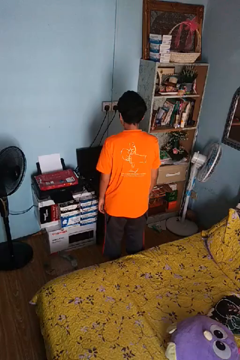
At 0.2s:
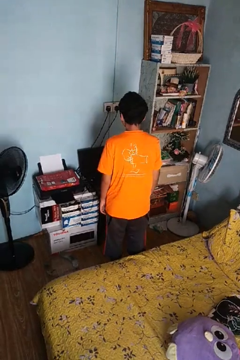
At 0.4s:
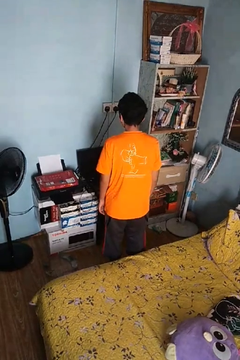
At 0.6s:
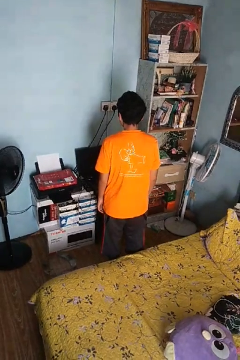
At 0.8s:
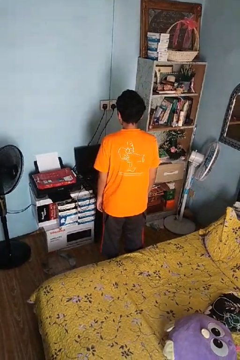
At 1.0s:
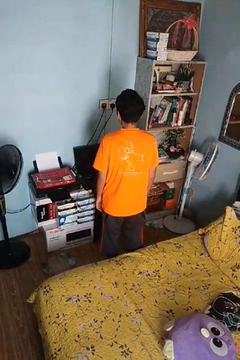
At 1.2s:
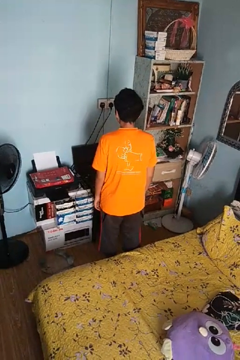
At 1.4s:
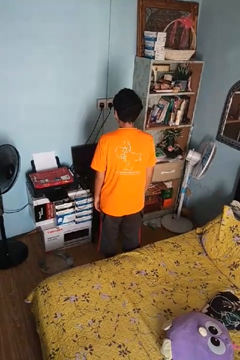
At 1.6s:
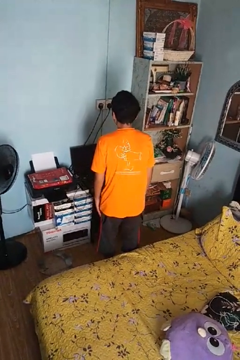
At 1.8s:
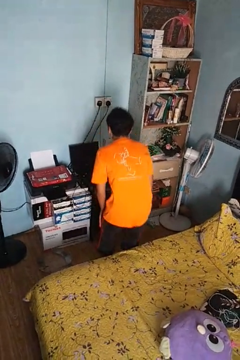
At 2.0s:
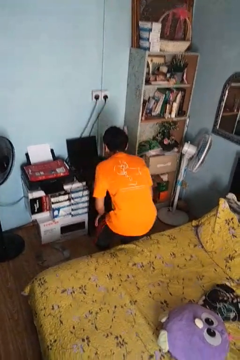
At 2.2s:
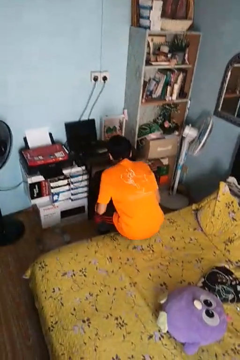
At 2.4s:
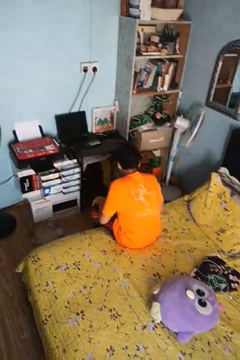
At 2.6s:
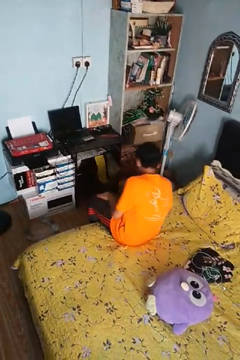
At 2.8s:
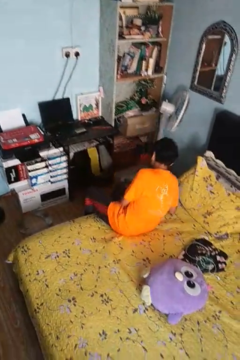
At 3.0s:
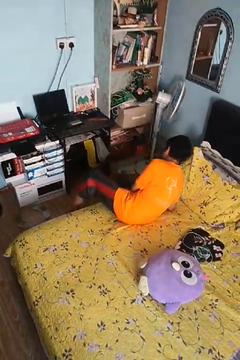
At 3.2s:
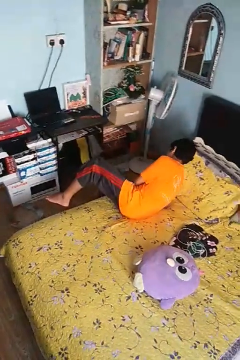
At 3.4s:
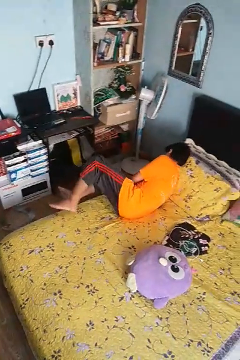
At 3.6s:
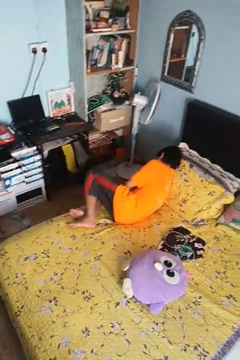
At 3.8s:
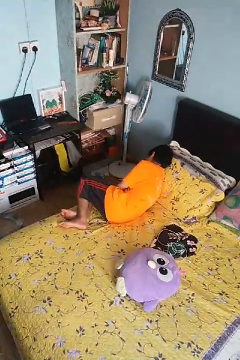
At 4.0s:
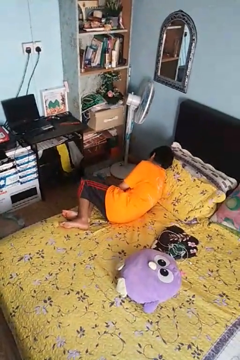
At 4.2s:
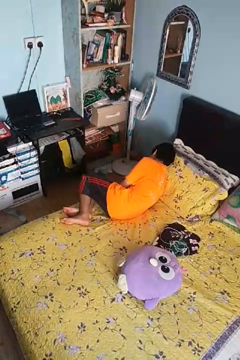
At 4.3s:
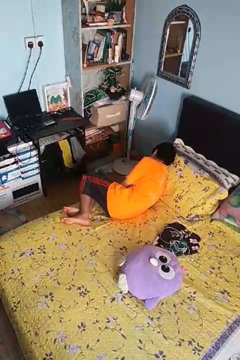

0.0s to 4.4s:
person lies down on bed

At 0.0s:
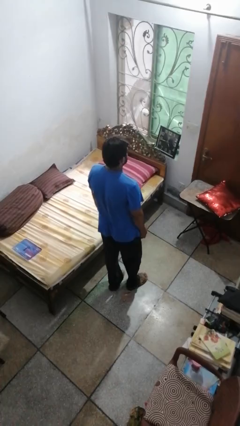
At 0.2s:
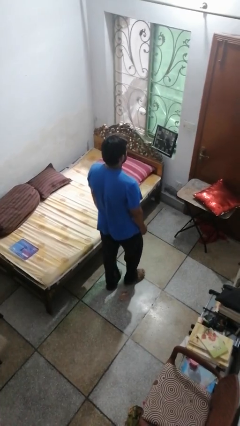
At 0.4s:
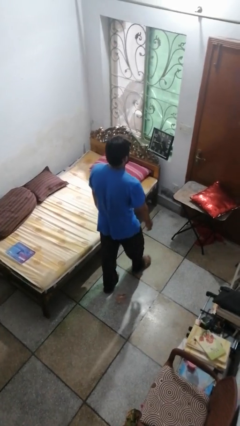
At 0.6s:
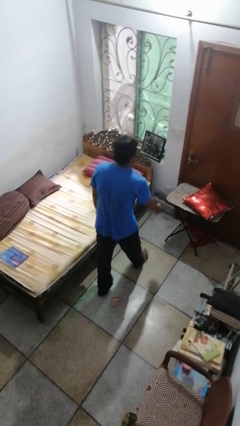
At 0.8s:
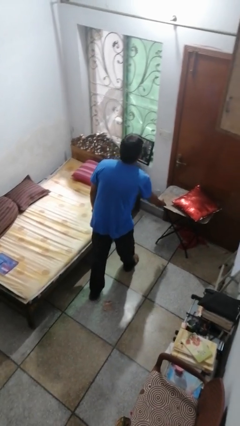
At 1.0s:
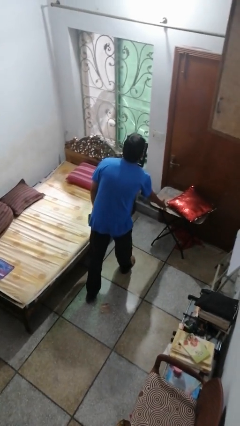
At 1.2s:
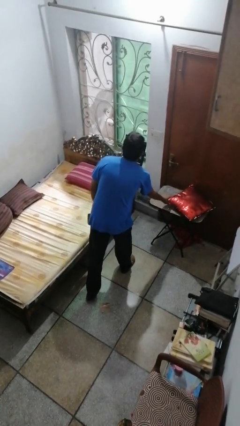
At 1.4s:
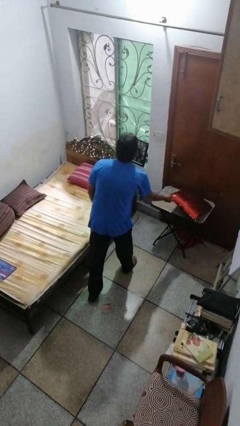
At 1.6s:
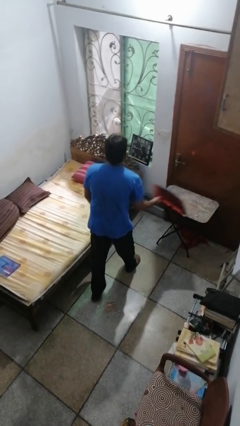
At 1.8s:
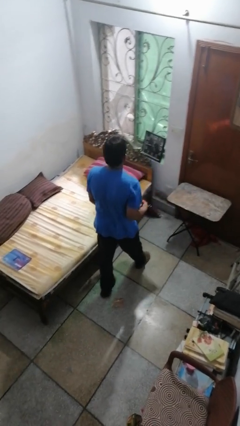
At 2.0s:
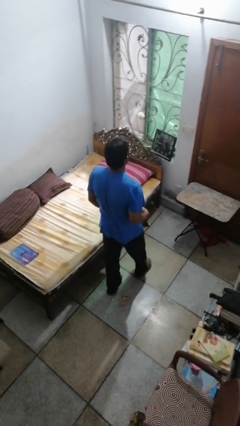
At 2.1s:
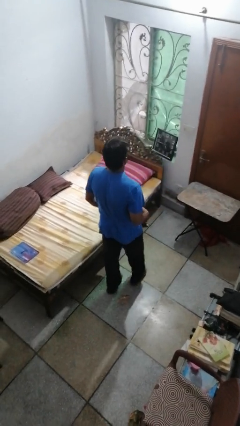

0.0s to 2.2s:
person picks up object from table

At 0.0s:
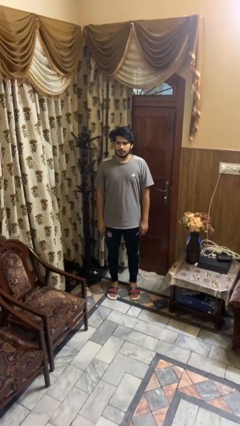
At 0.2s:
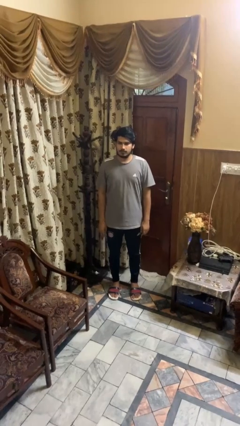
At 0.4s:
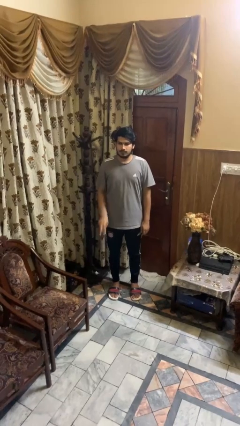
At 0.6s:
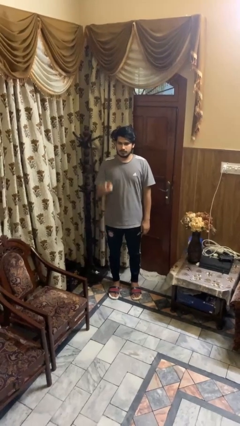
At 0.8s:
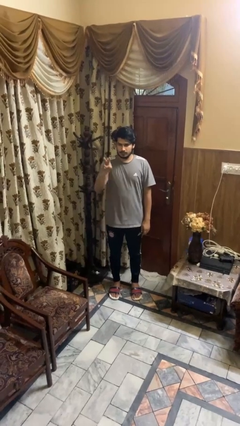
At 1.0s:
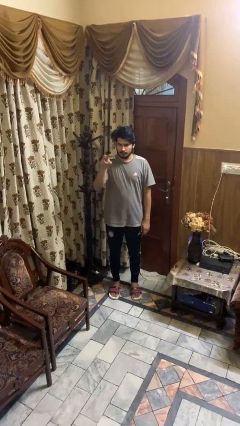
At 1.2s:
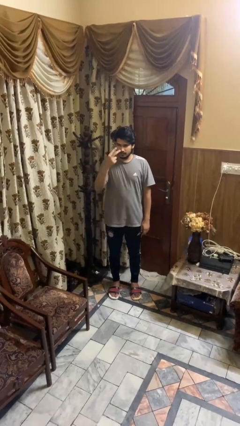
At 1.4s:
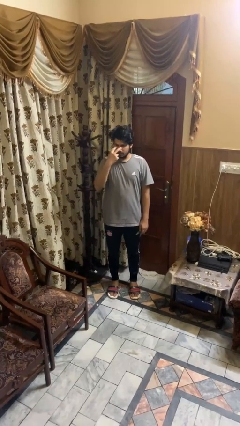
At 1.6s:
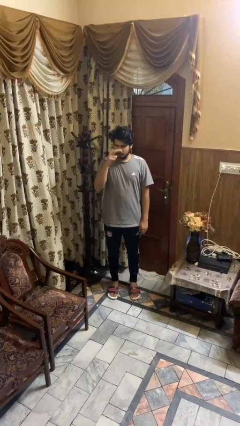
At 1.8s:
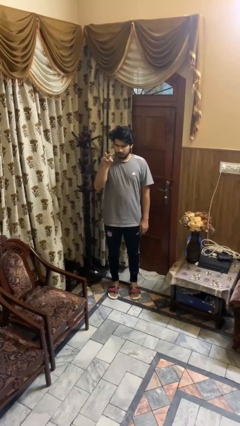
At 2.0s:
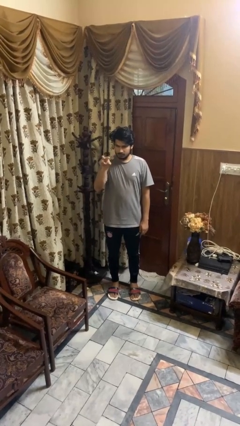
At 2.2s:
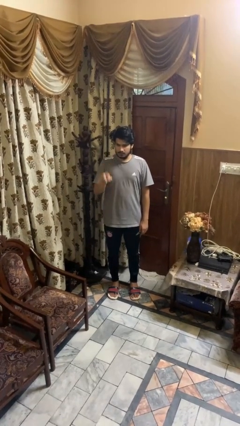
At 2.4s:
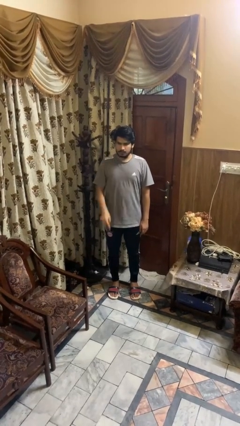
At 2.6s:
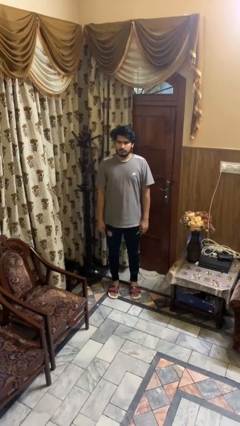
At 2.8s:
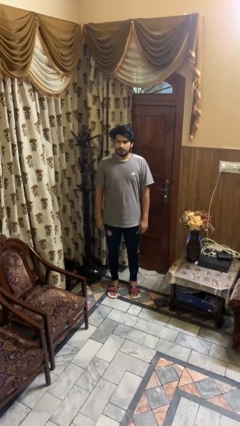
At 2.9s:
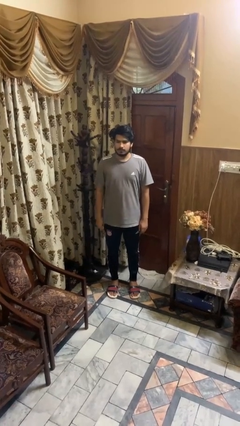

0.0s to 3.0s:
person gestures watch closely

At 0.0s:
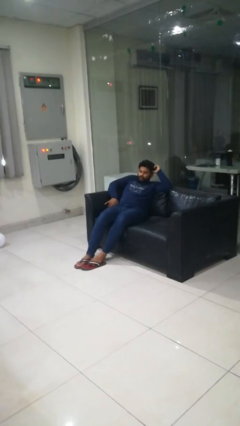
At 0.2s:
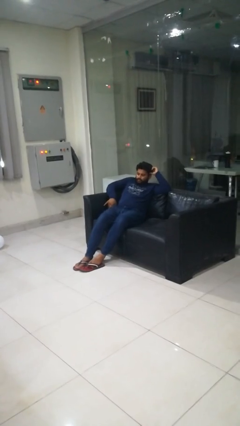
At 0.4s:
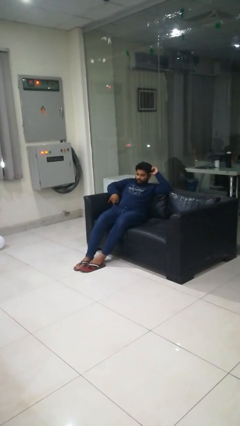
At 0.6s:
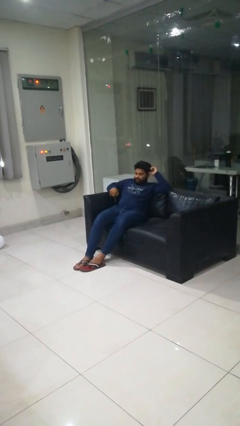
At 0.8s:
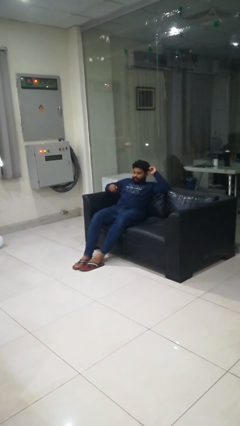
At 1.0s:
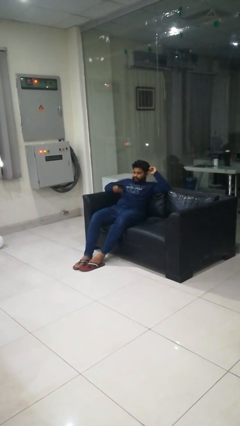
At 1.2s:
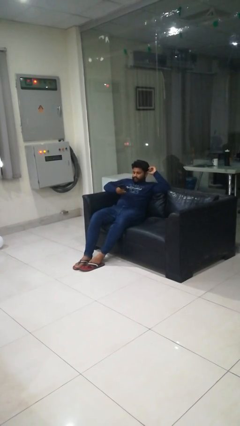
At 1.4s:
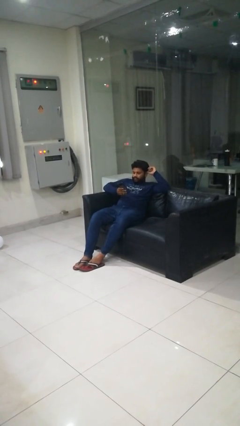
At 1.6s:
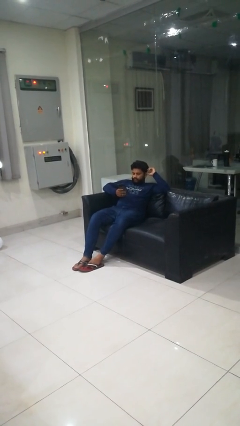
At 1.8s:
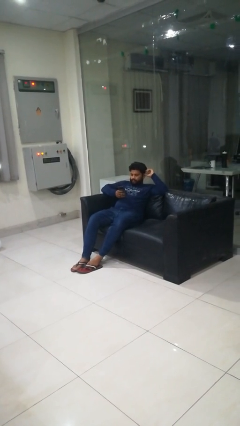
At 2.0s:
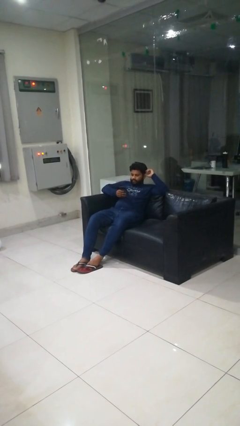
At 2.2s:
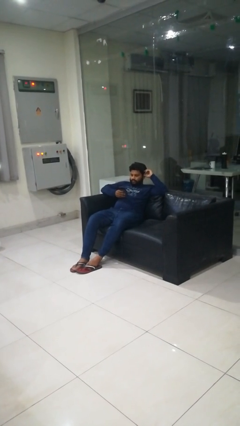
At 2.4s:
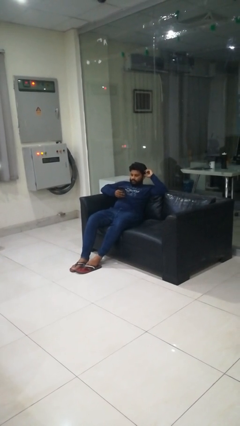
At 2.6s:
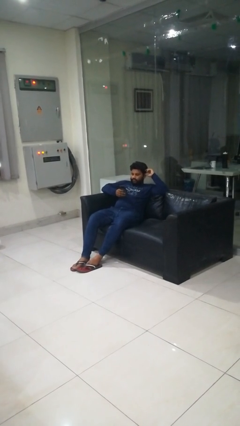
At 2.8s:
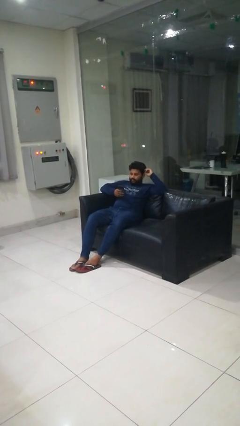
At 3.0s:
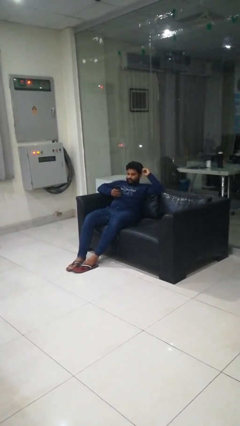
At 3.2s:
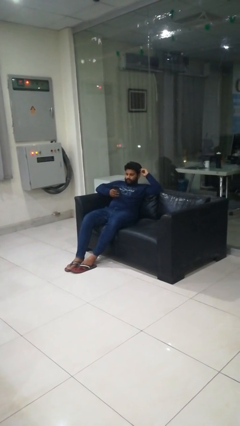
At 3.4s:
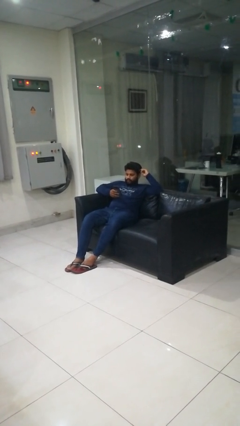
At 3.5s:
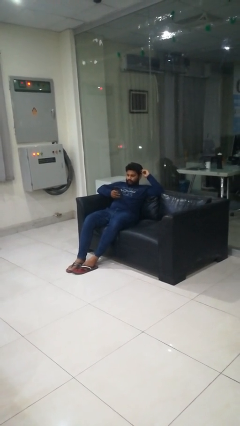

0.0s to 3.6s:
person takes phone from pocket

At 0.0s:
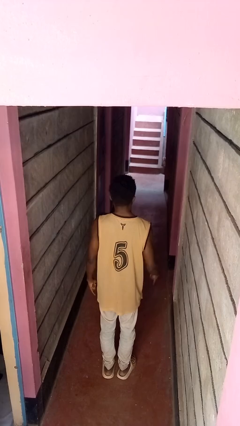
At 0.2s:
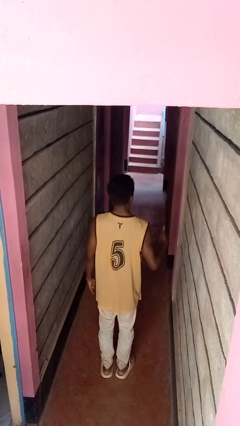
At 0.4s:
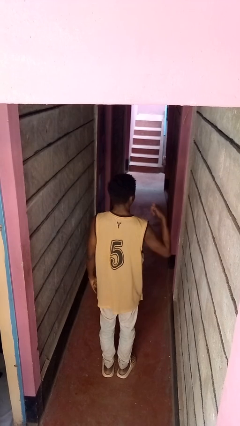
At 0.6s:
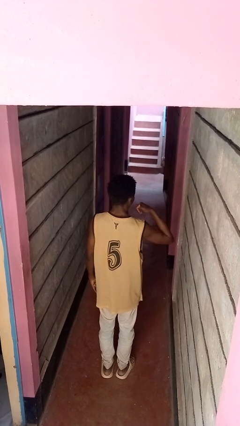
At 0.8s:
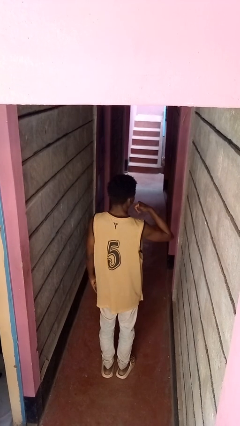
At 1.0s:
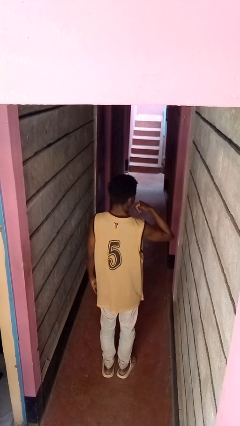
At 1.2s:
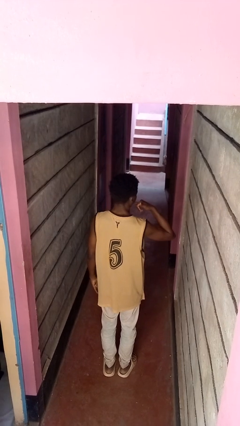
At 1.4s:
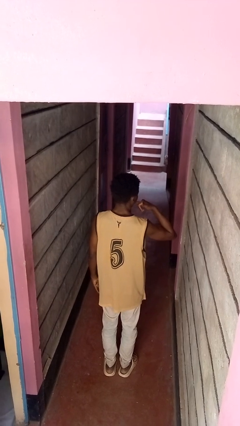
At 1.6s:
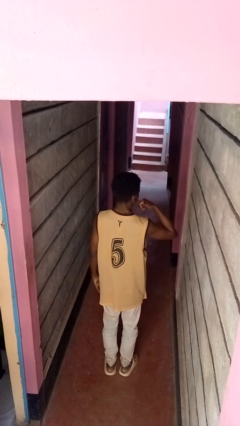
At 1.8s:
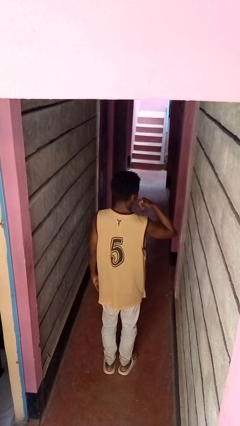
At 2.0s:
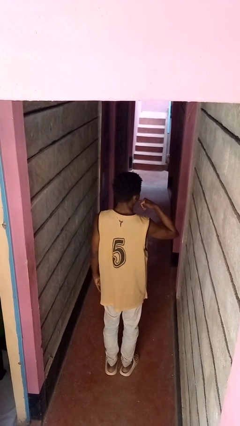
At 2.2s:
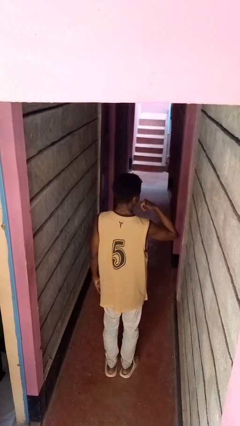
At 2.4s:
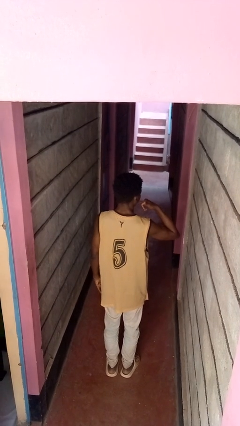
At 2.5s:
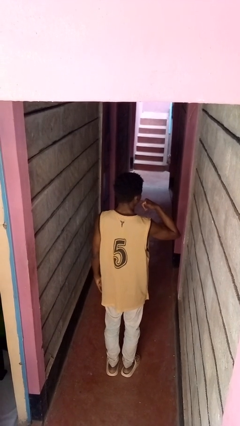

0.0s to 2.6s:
person gestures call me

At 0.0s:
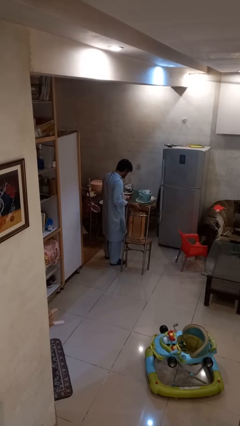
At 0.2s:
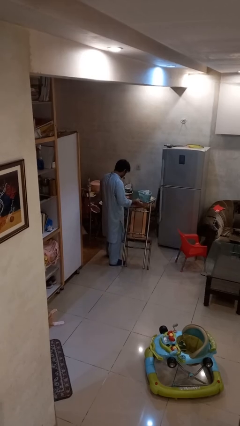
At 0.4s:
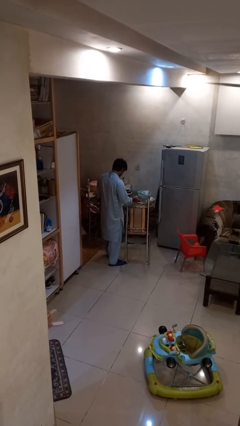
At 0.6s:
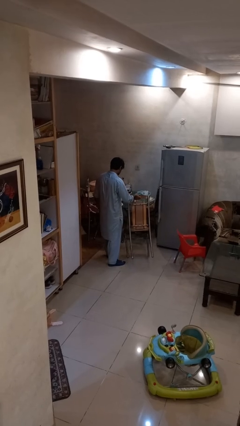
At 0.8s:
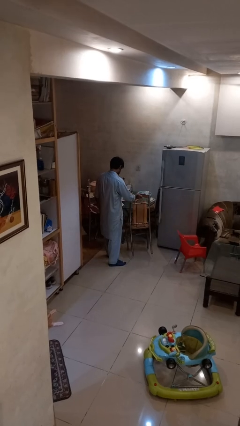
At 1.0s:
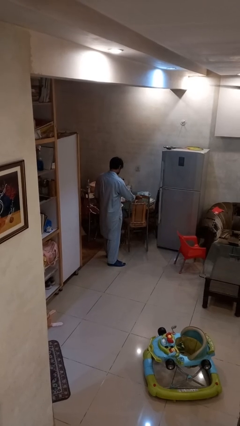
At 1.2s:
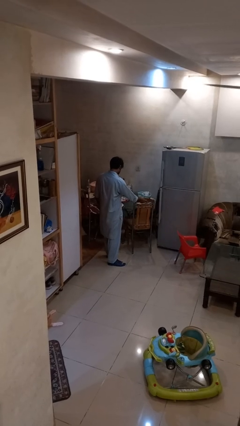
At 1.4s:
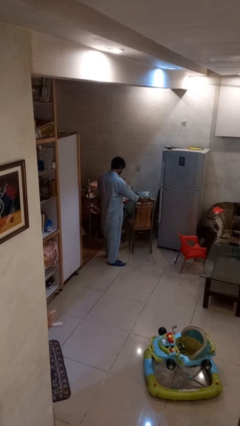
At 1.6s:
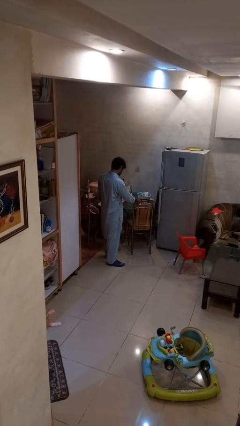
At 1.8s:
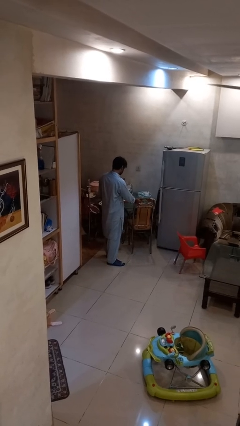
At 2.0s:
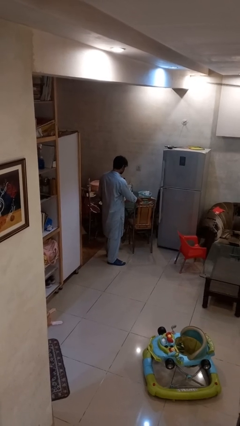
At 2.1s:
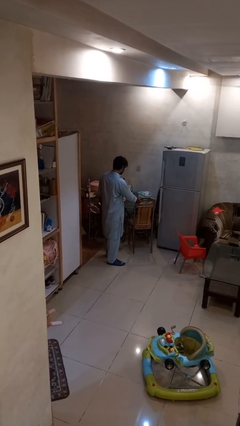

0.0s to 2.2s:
person pushes in chair
